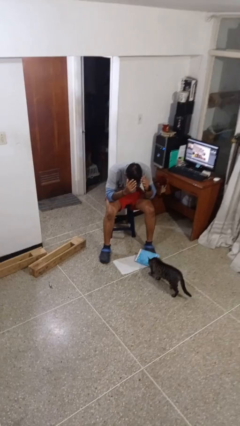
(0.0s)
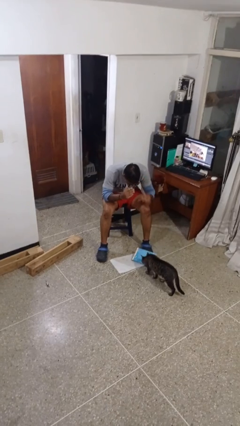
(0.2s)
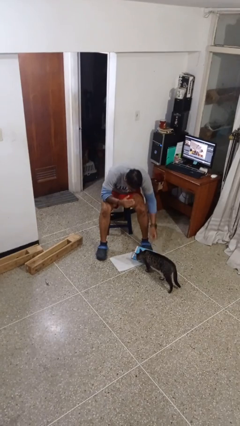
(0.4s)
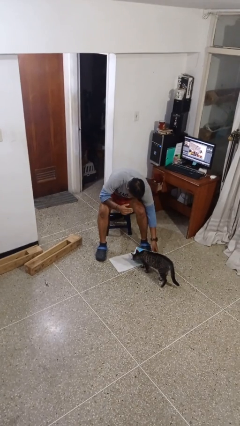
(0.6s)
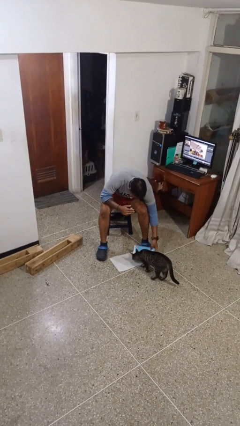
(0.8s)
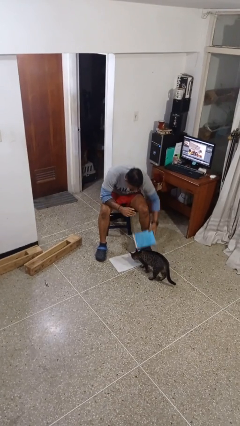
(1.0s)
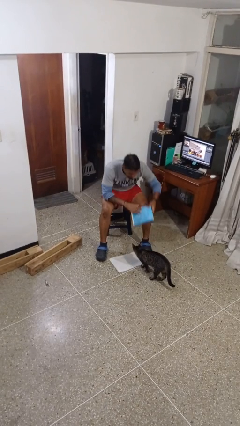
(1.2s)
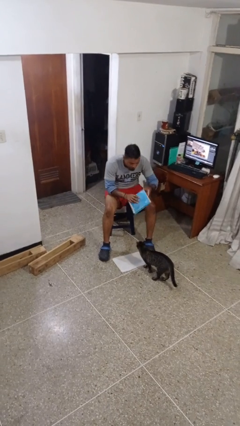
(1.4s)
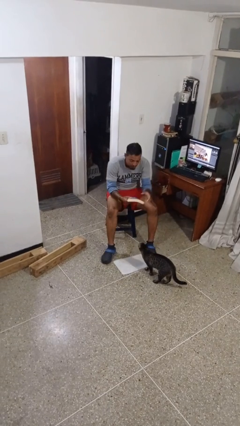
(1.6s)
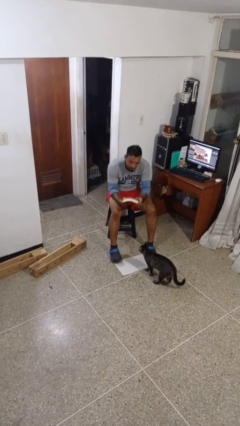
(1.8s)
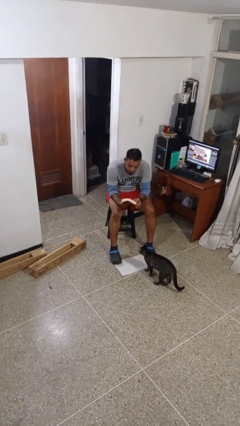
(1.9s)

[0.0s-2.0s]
person picks up object from floor

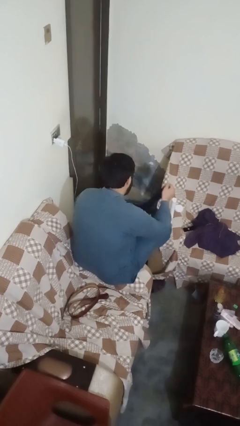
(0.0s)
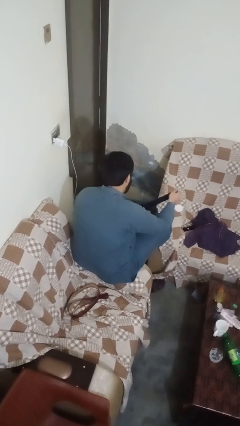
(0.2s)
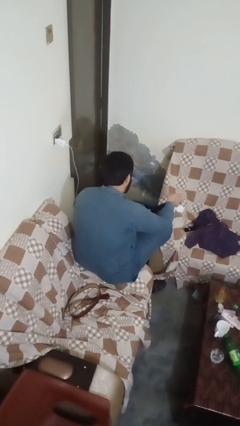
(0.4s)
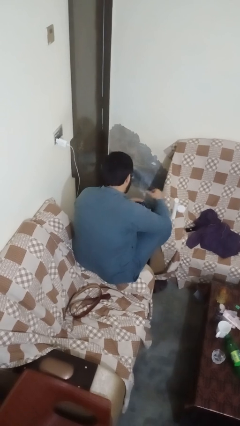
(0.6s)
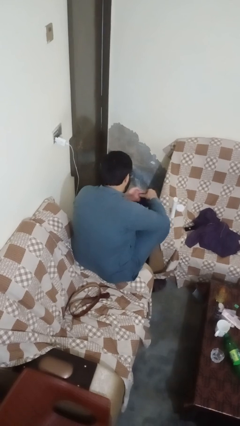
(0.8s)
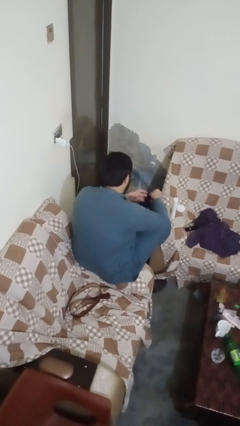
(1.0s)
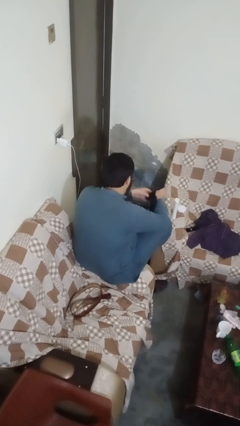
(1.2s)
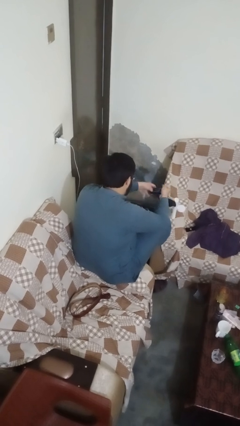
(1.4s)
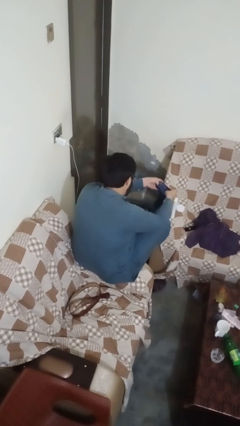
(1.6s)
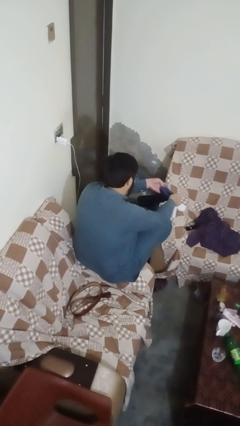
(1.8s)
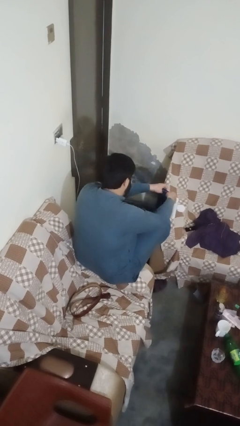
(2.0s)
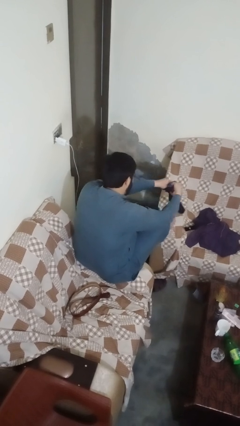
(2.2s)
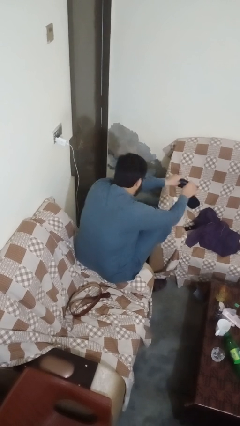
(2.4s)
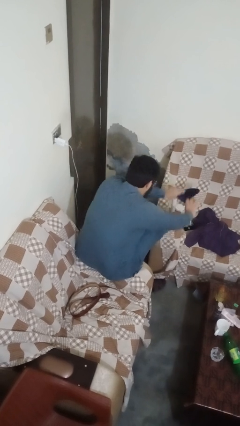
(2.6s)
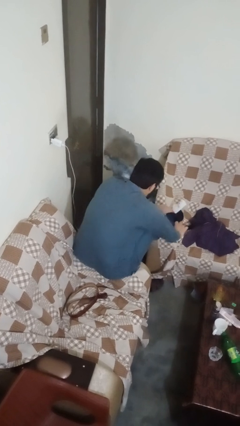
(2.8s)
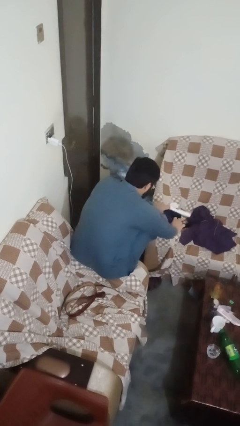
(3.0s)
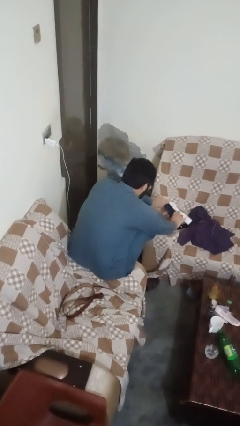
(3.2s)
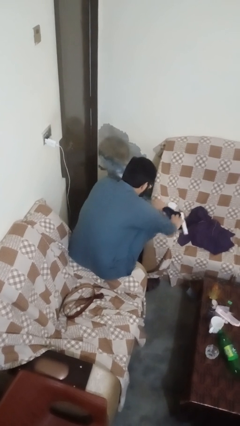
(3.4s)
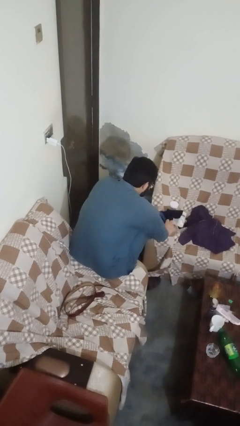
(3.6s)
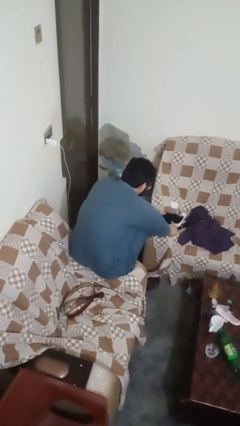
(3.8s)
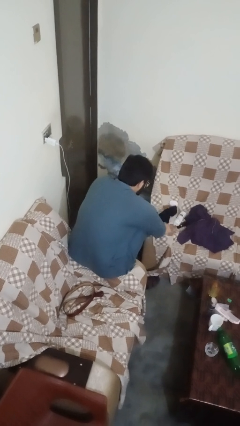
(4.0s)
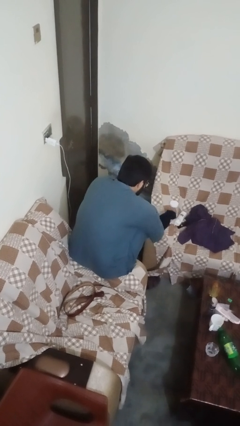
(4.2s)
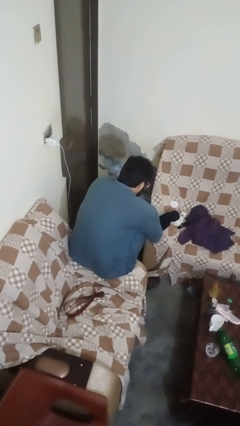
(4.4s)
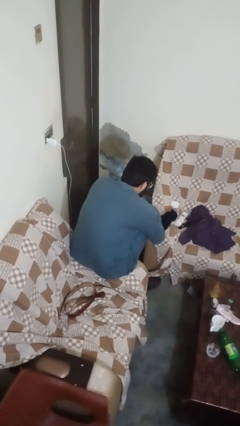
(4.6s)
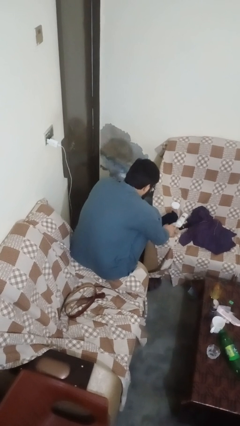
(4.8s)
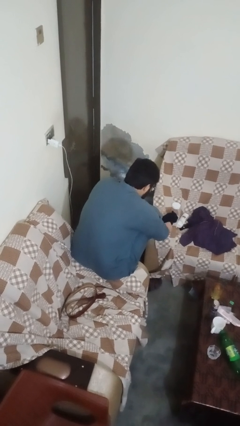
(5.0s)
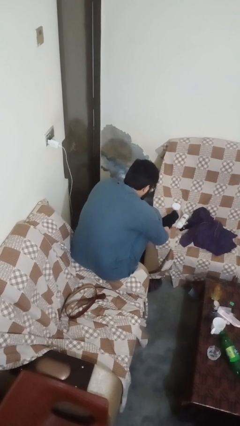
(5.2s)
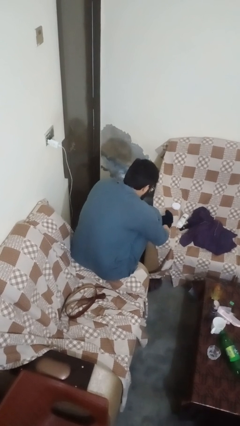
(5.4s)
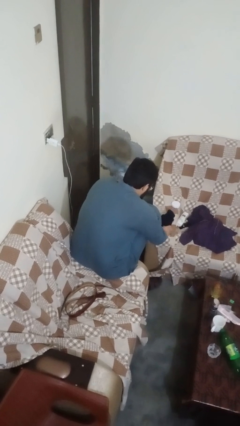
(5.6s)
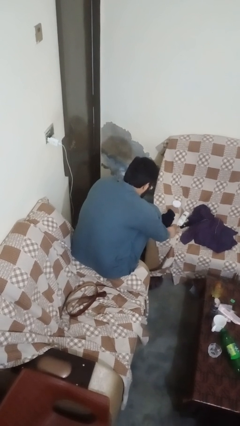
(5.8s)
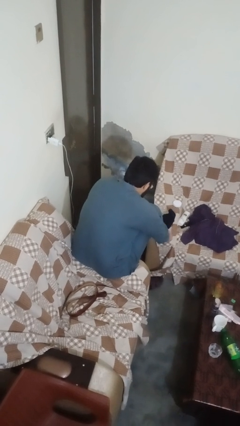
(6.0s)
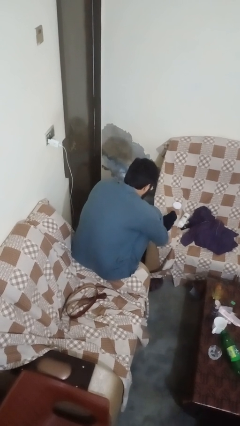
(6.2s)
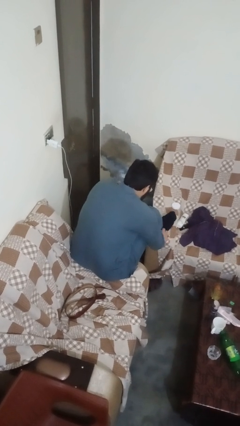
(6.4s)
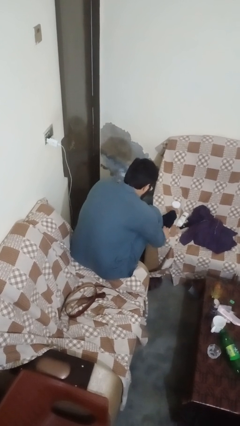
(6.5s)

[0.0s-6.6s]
person puts on socks

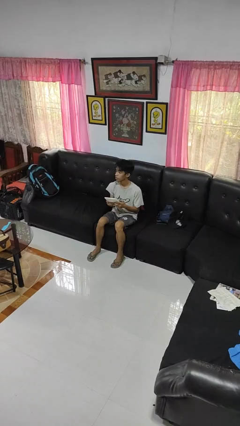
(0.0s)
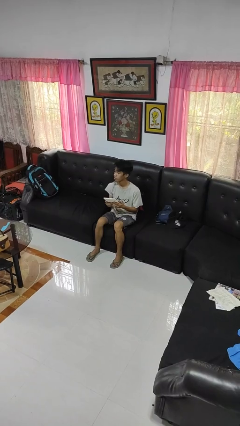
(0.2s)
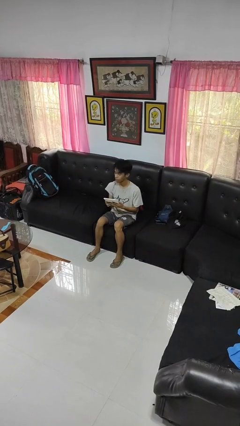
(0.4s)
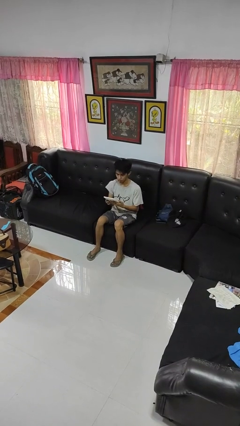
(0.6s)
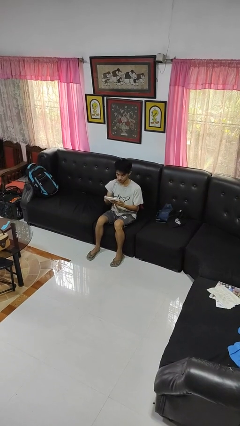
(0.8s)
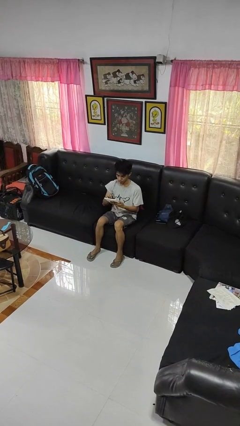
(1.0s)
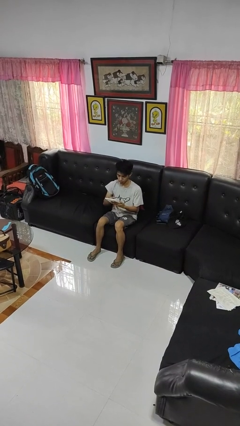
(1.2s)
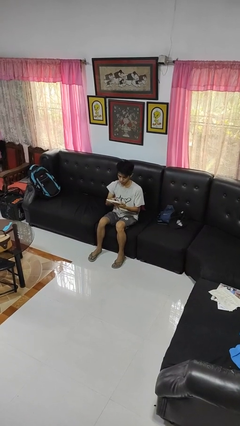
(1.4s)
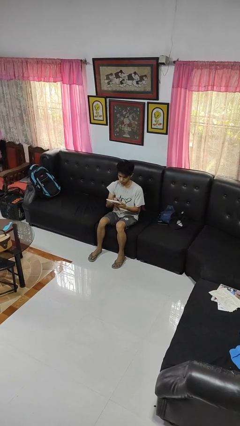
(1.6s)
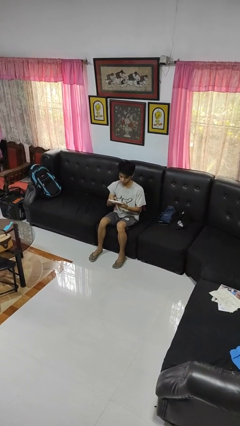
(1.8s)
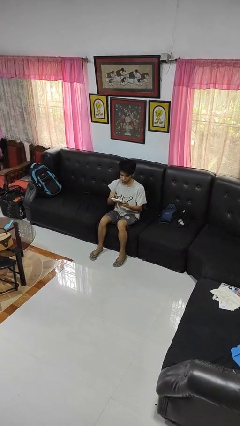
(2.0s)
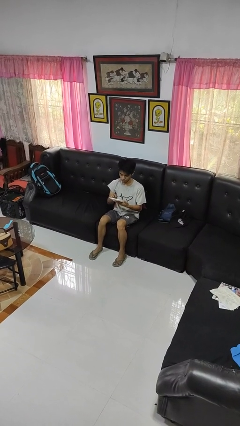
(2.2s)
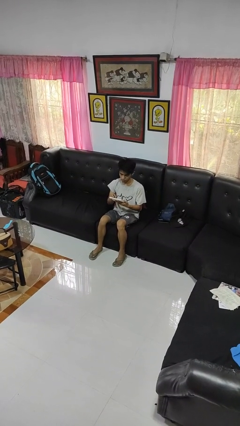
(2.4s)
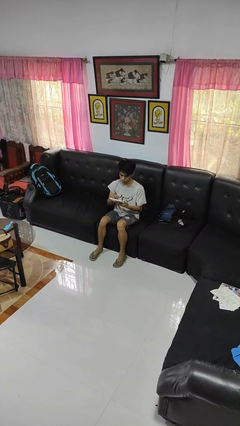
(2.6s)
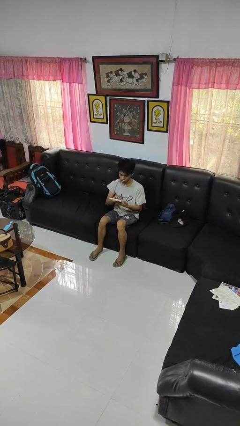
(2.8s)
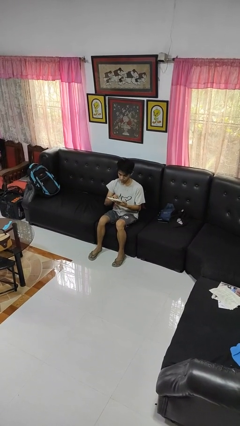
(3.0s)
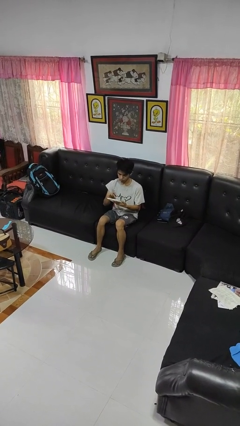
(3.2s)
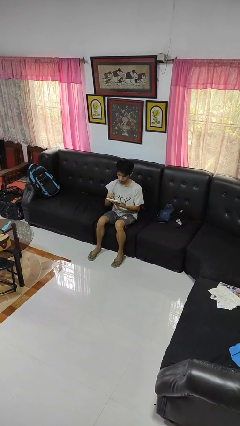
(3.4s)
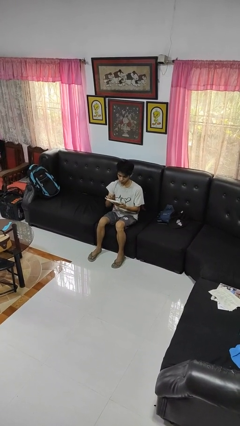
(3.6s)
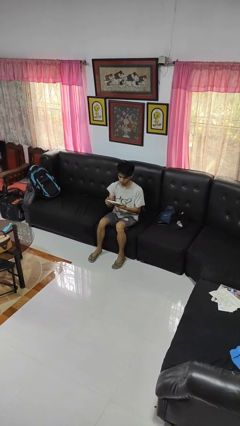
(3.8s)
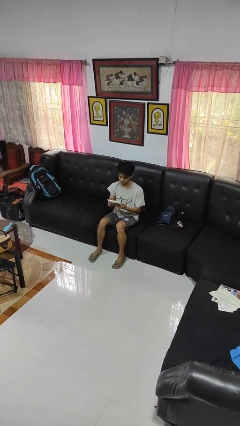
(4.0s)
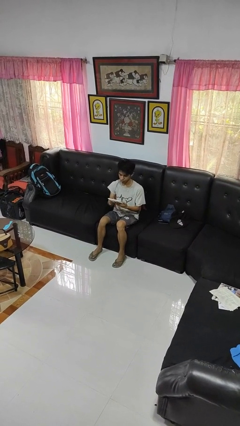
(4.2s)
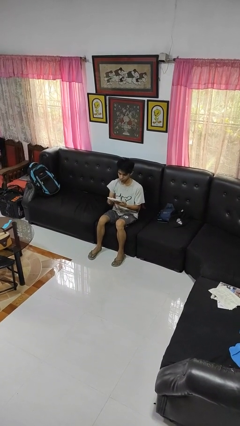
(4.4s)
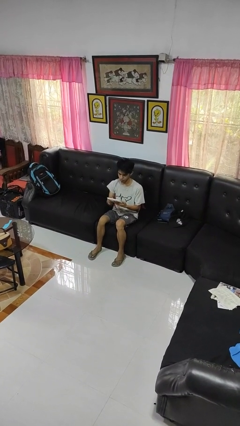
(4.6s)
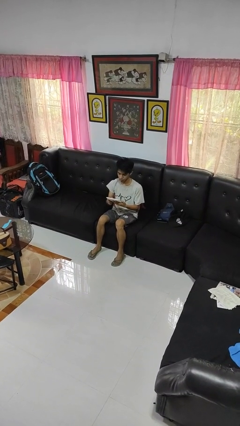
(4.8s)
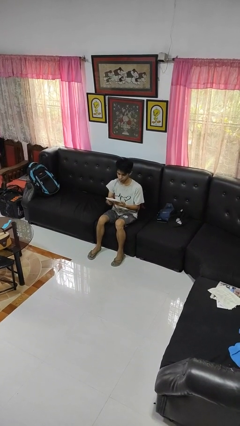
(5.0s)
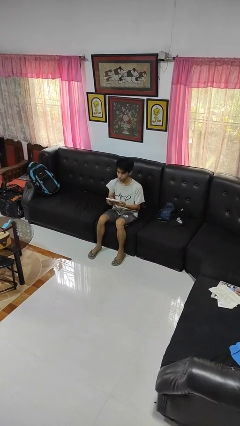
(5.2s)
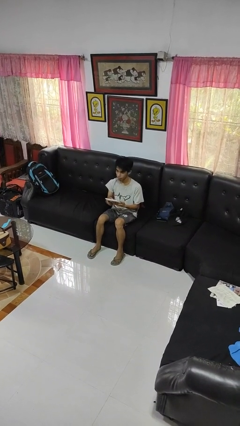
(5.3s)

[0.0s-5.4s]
person interacts with tablet

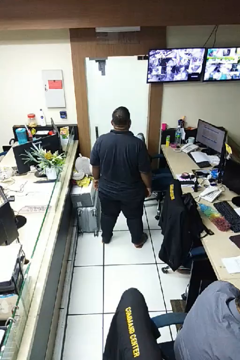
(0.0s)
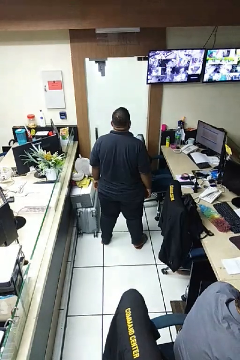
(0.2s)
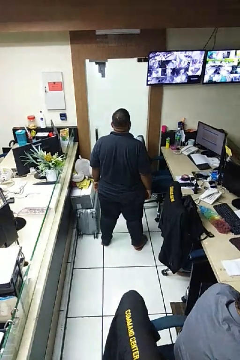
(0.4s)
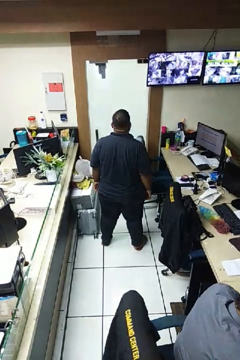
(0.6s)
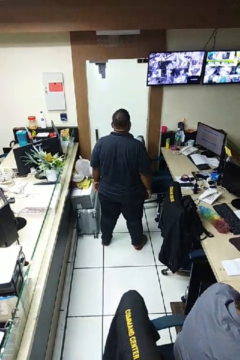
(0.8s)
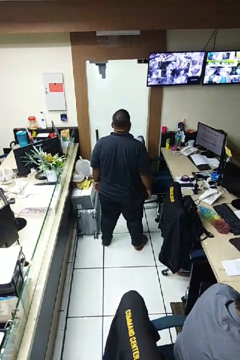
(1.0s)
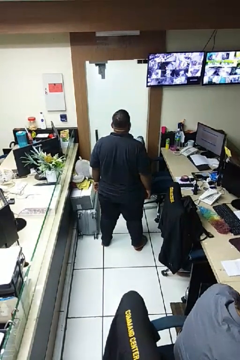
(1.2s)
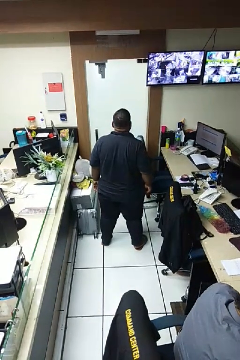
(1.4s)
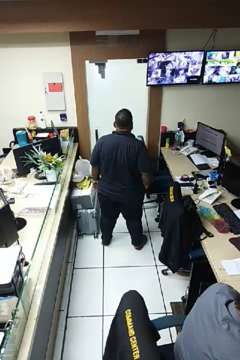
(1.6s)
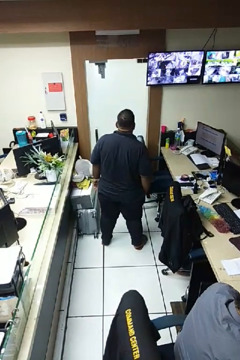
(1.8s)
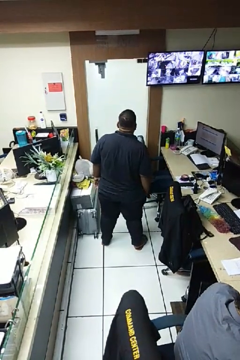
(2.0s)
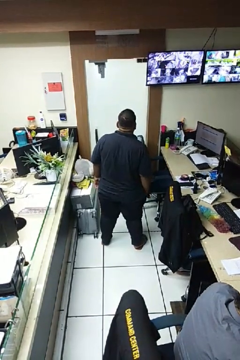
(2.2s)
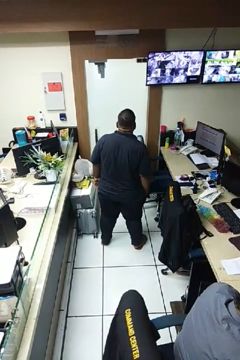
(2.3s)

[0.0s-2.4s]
person puts hands in back pockets

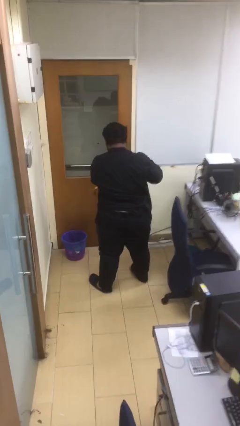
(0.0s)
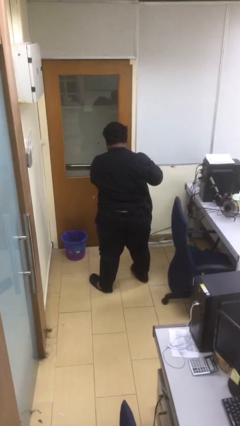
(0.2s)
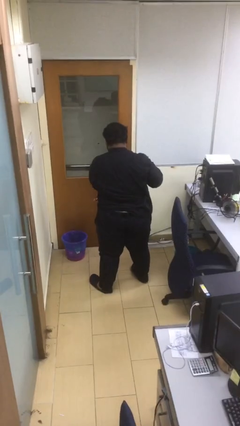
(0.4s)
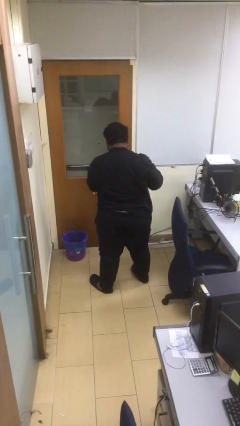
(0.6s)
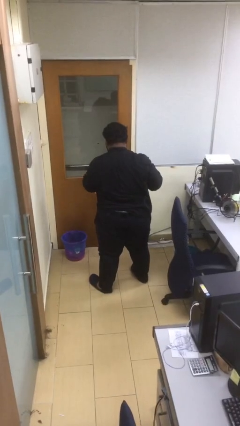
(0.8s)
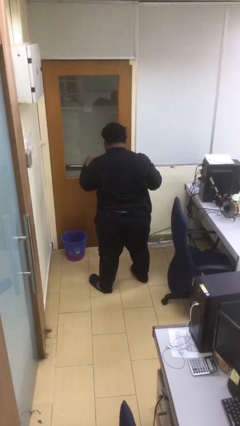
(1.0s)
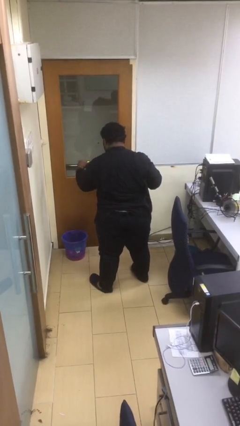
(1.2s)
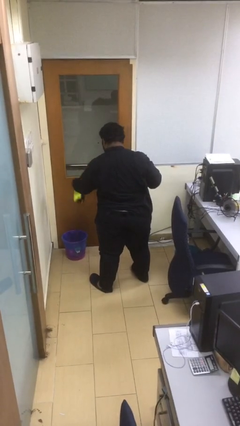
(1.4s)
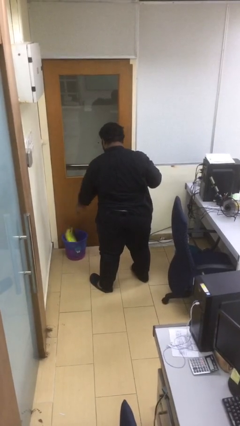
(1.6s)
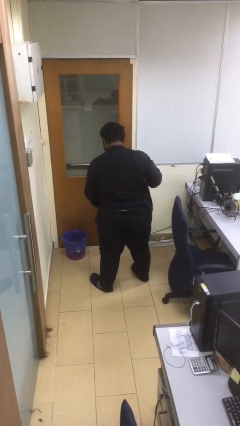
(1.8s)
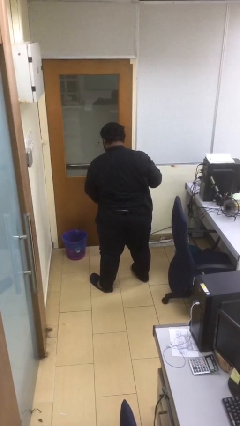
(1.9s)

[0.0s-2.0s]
person discards trash
